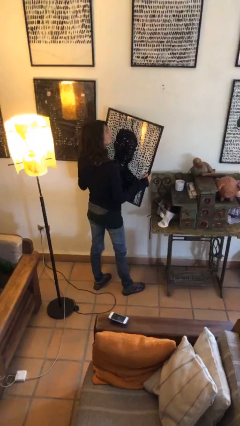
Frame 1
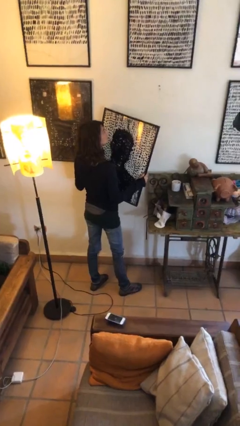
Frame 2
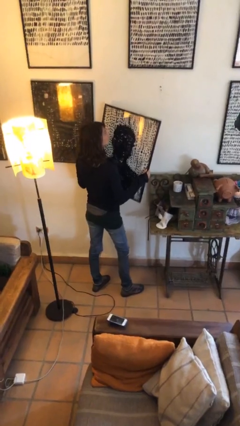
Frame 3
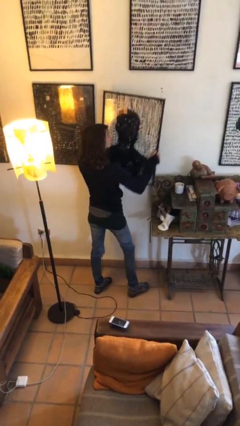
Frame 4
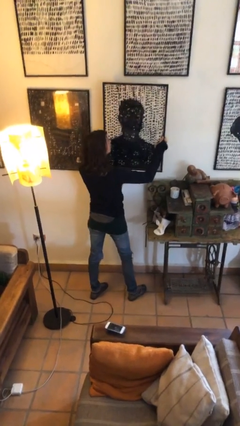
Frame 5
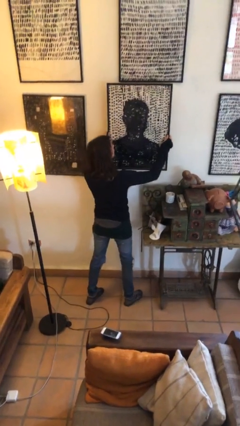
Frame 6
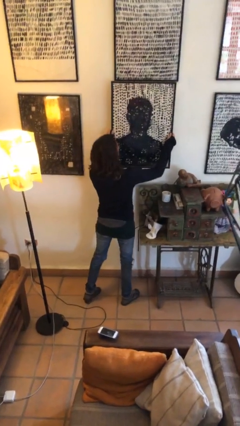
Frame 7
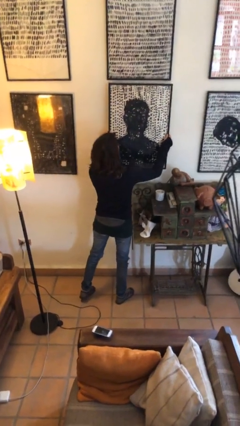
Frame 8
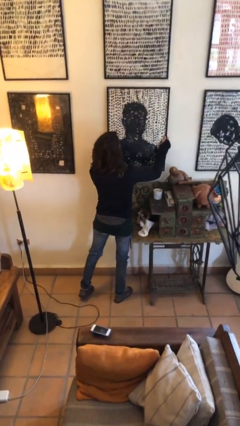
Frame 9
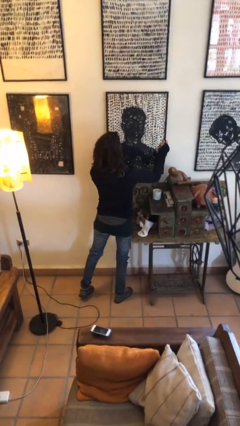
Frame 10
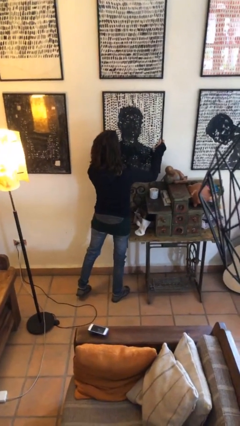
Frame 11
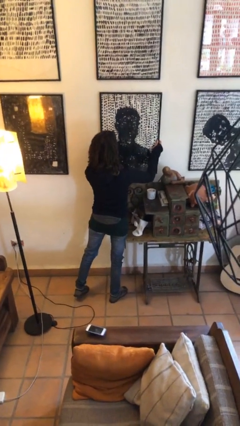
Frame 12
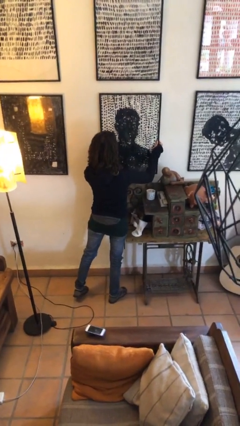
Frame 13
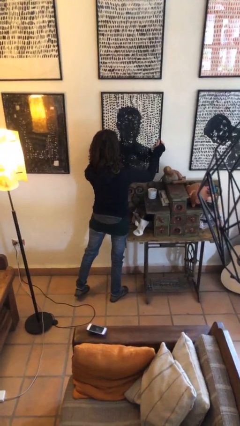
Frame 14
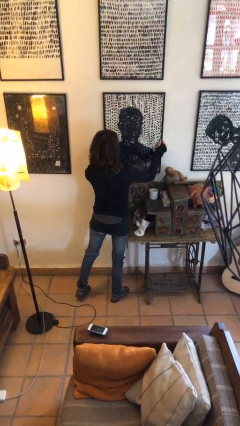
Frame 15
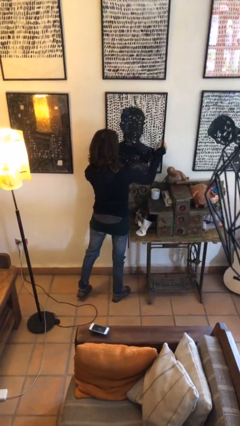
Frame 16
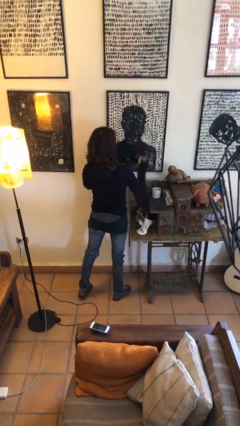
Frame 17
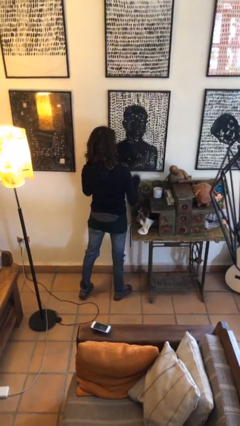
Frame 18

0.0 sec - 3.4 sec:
person puts up picture frame

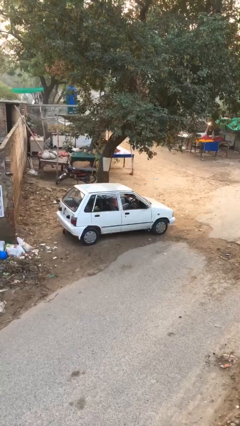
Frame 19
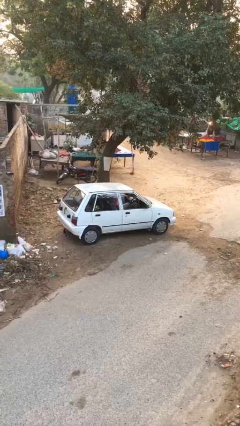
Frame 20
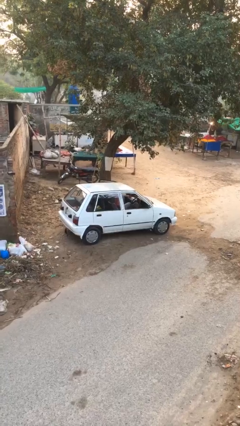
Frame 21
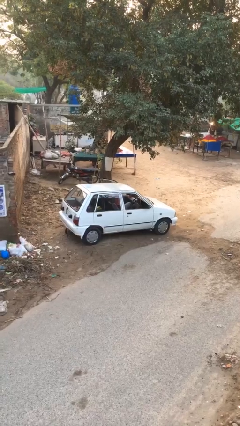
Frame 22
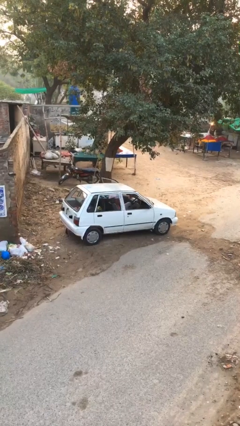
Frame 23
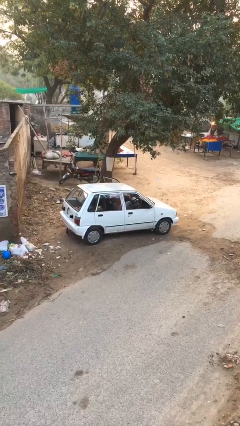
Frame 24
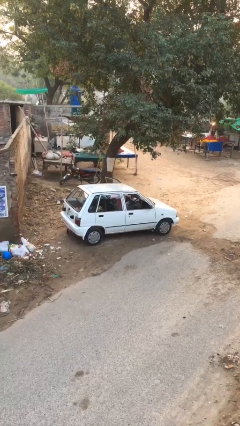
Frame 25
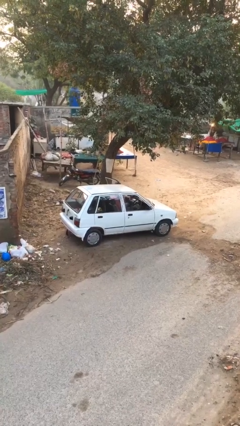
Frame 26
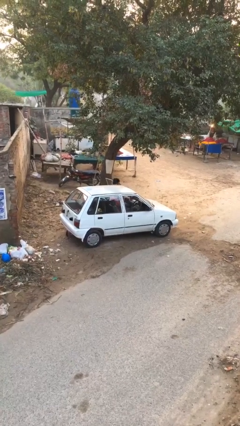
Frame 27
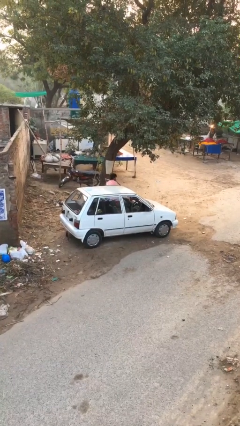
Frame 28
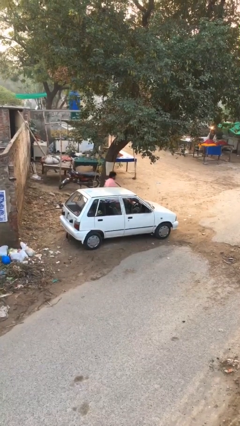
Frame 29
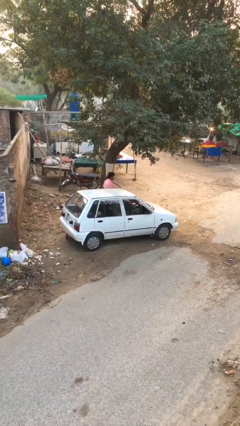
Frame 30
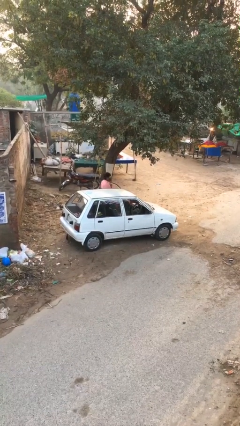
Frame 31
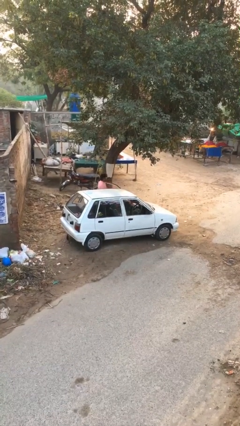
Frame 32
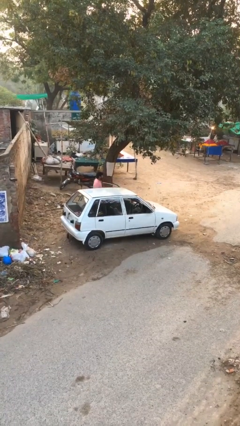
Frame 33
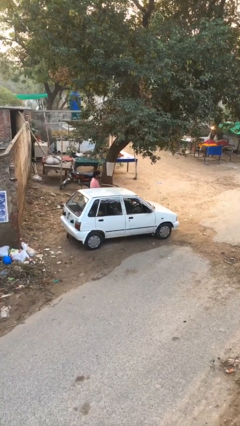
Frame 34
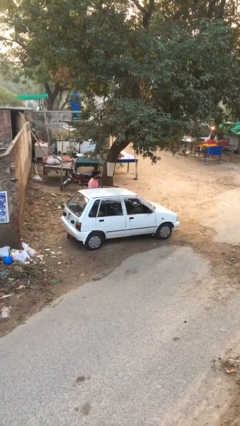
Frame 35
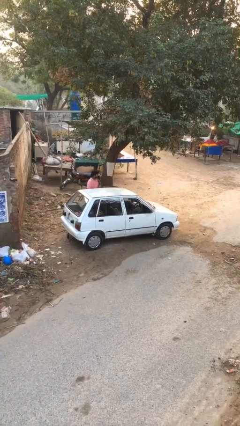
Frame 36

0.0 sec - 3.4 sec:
car drops off person

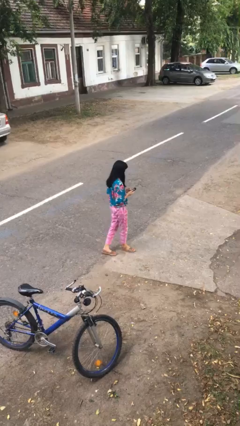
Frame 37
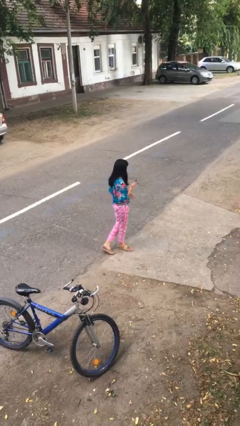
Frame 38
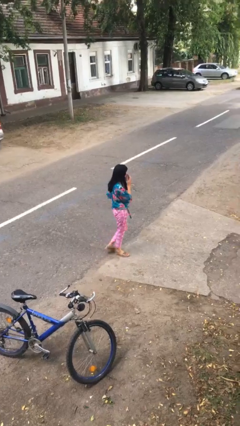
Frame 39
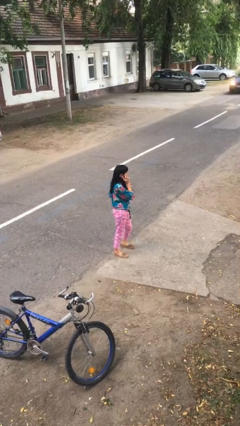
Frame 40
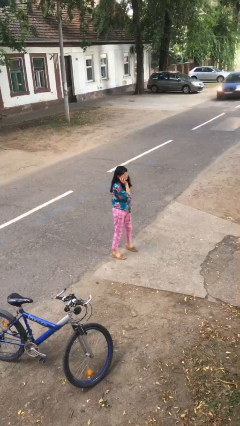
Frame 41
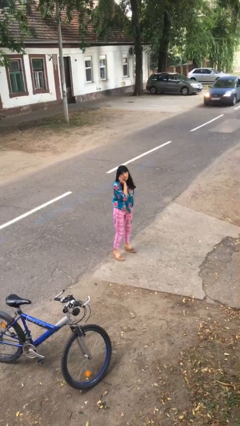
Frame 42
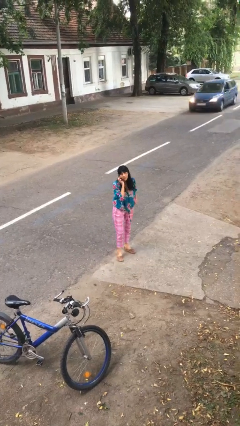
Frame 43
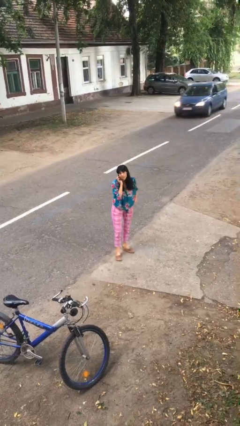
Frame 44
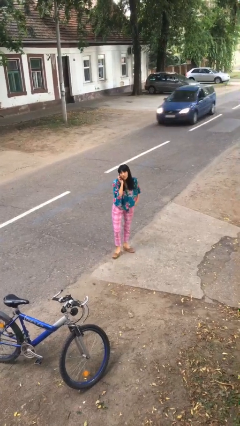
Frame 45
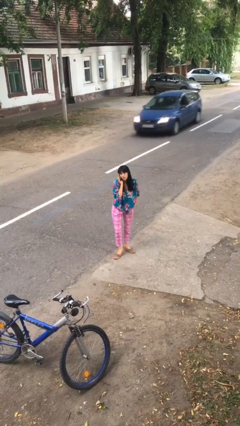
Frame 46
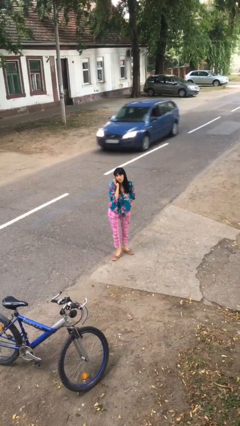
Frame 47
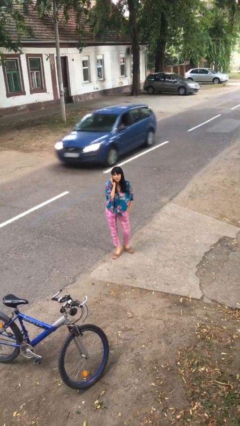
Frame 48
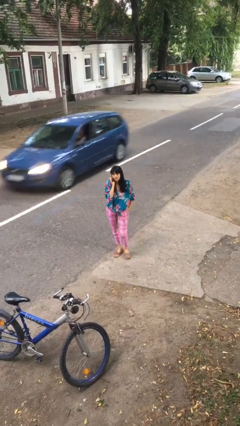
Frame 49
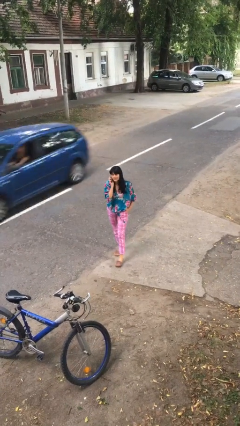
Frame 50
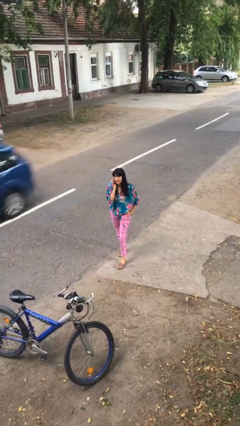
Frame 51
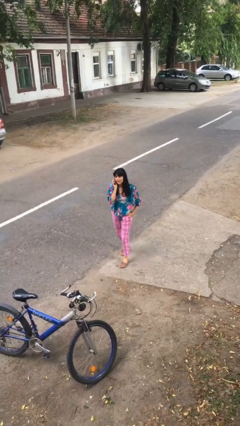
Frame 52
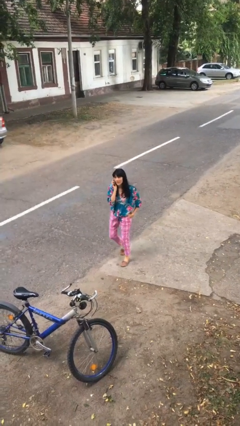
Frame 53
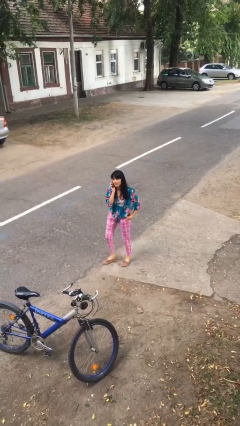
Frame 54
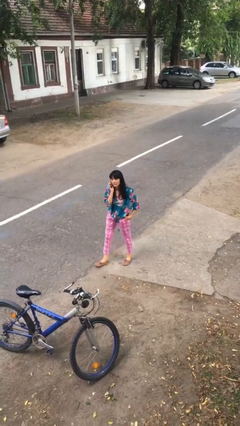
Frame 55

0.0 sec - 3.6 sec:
person talks on phone

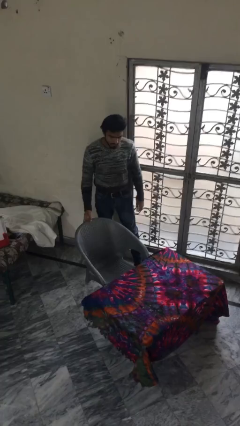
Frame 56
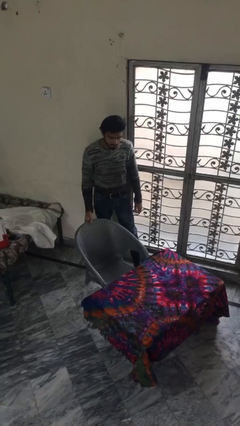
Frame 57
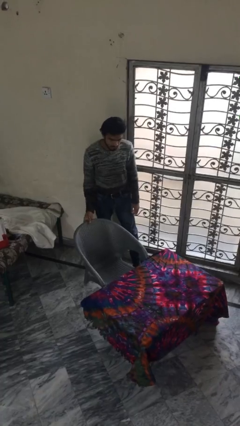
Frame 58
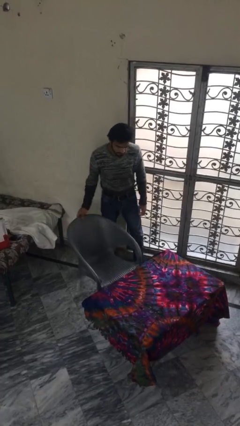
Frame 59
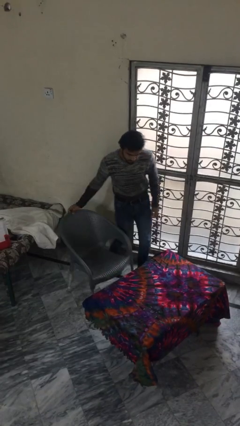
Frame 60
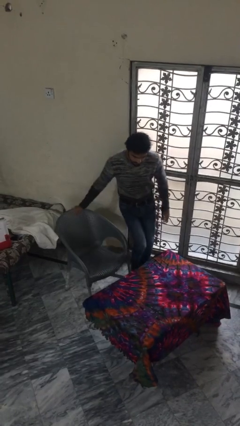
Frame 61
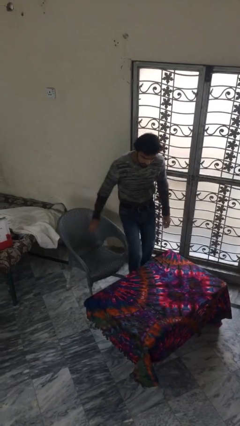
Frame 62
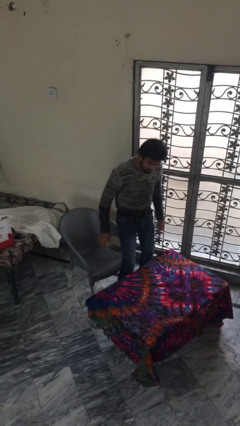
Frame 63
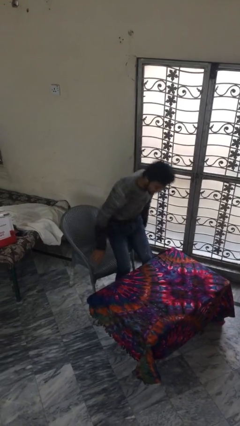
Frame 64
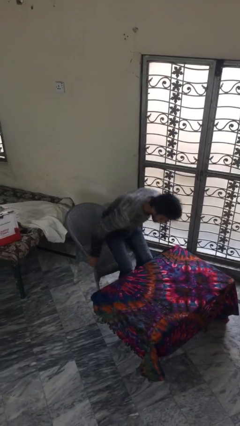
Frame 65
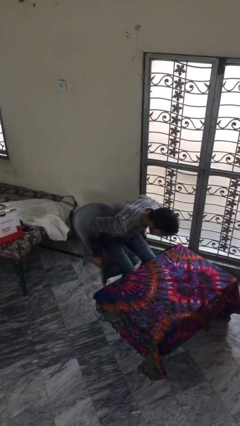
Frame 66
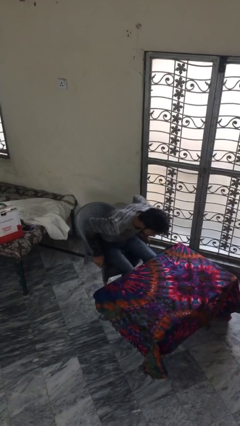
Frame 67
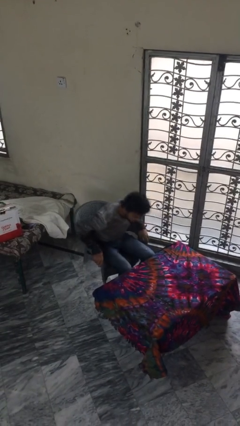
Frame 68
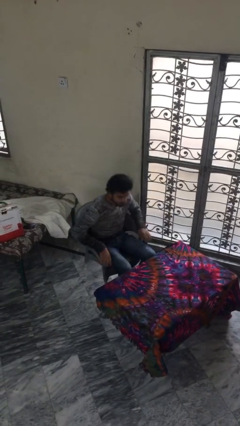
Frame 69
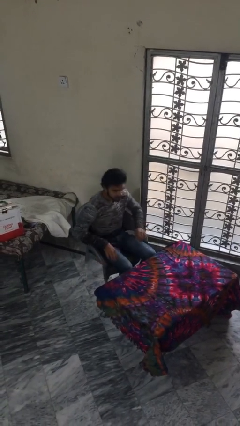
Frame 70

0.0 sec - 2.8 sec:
person sits down

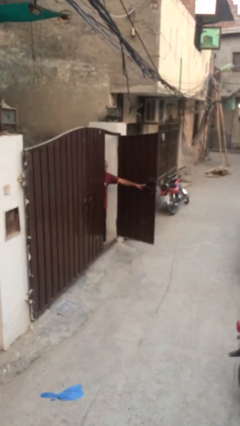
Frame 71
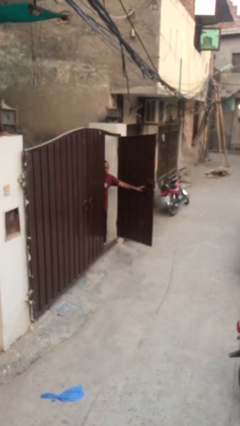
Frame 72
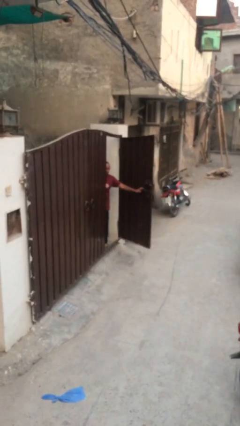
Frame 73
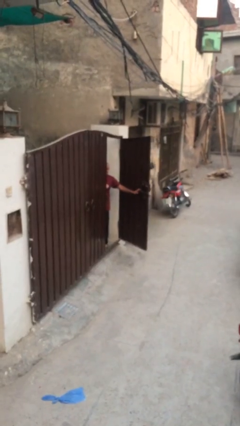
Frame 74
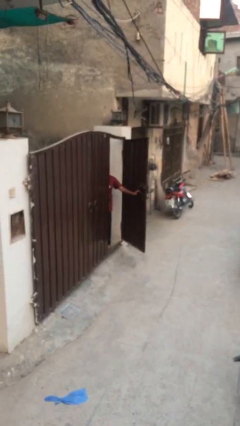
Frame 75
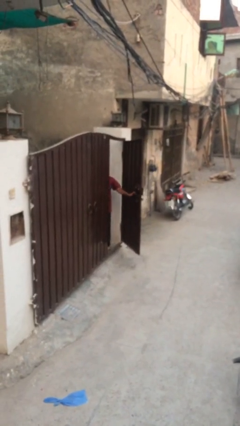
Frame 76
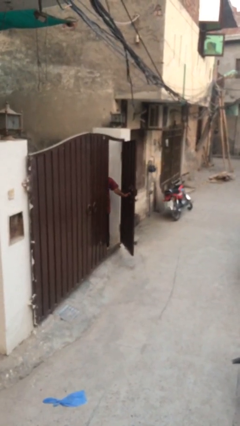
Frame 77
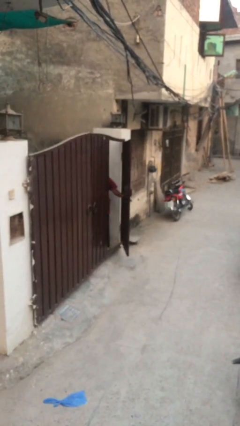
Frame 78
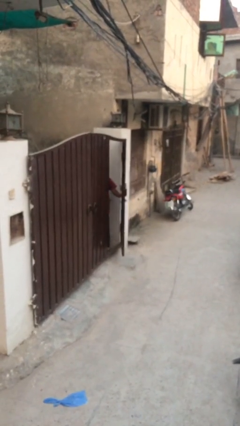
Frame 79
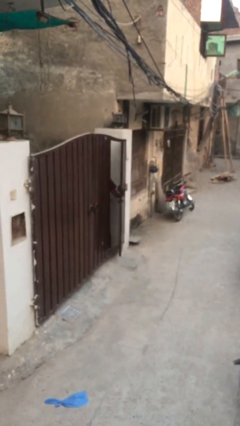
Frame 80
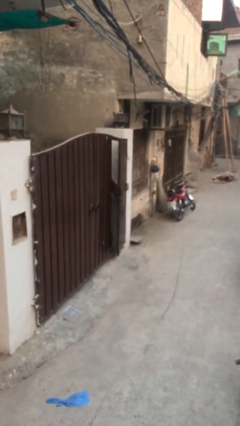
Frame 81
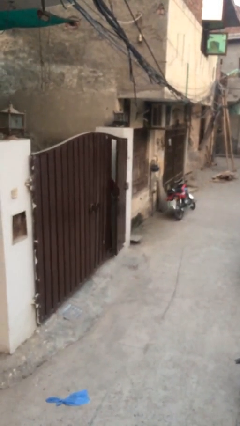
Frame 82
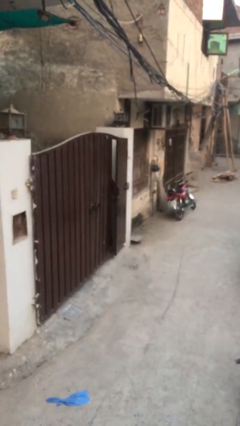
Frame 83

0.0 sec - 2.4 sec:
person closes facility door

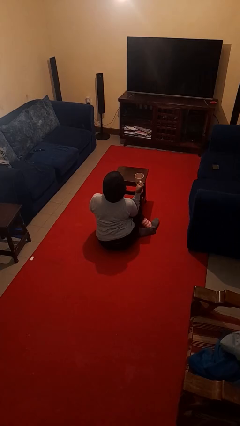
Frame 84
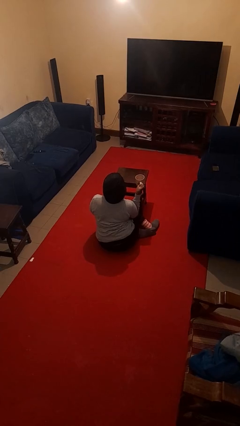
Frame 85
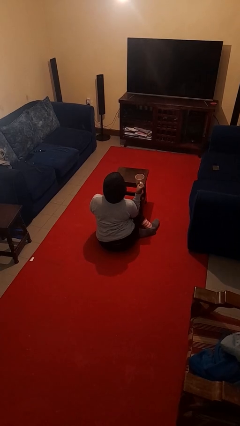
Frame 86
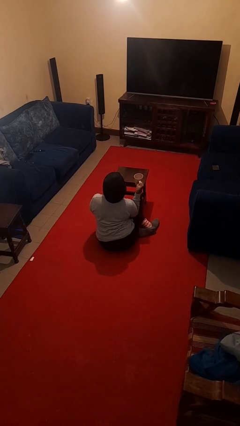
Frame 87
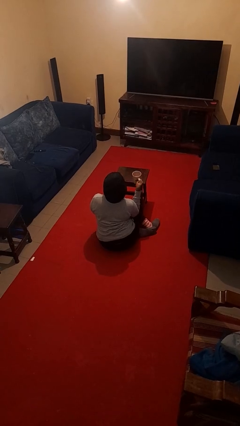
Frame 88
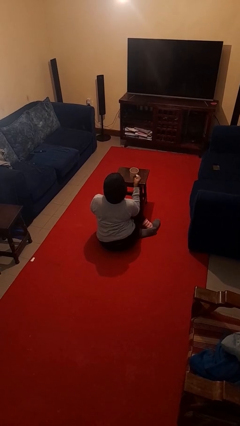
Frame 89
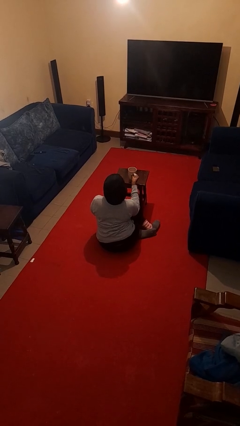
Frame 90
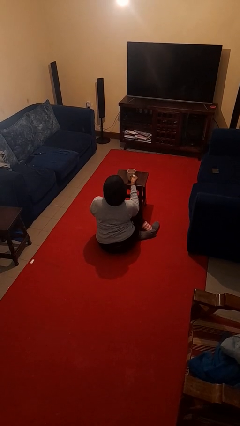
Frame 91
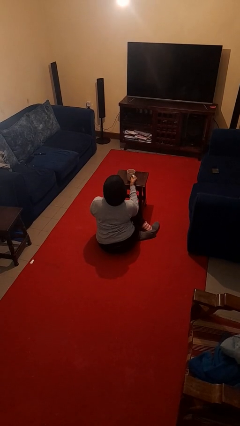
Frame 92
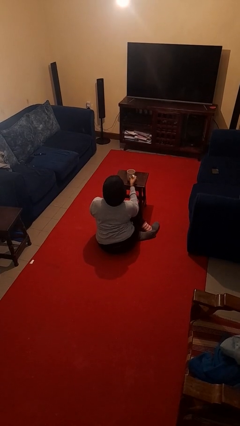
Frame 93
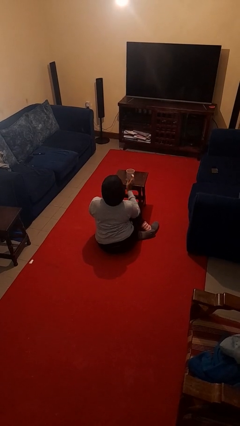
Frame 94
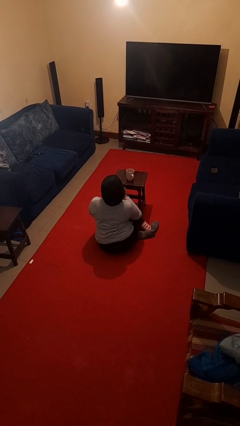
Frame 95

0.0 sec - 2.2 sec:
person puts down object on table
